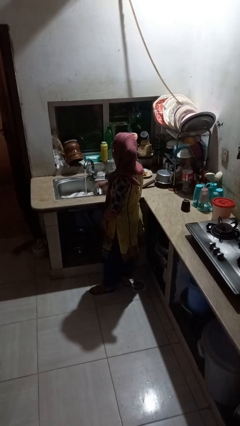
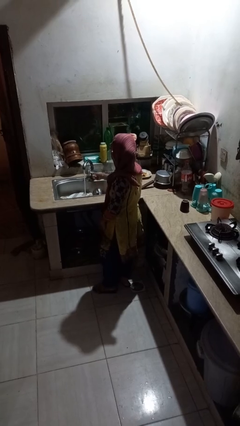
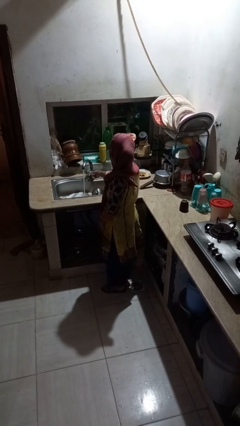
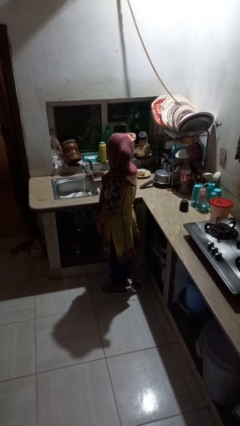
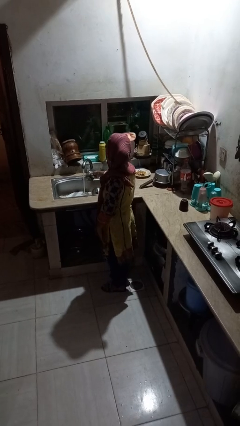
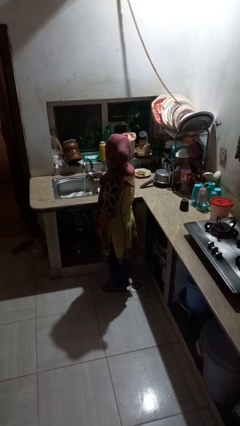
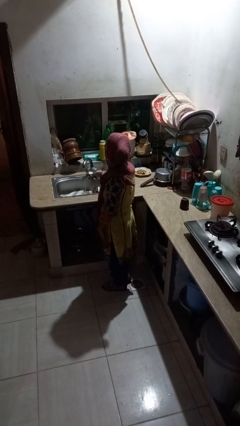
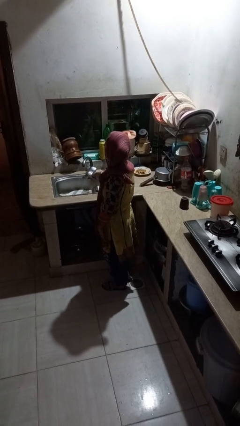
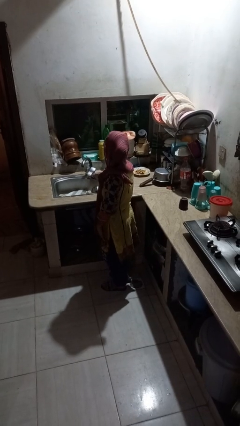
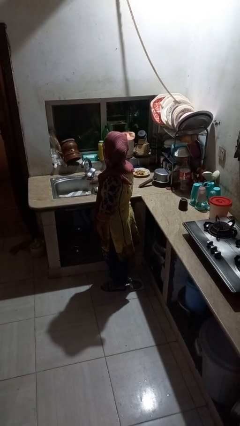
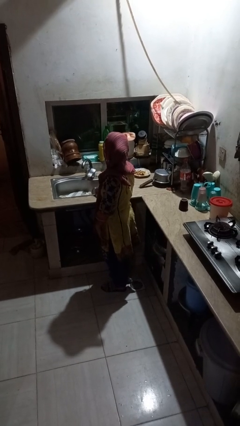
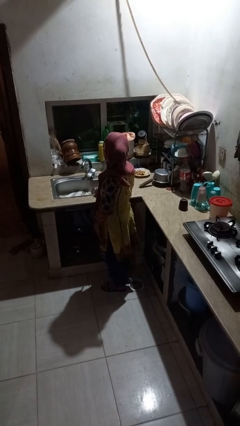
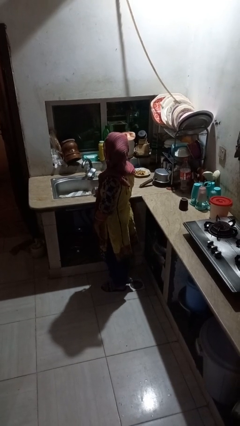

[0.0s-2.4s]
person turns off faucet

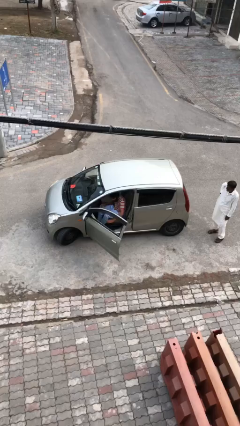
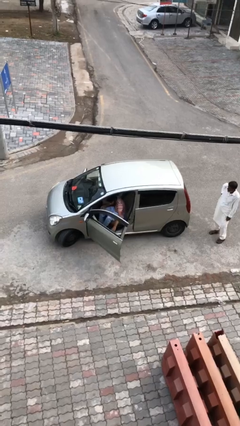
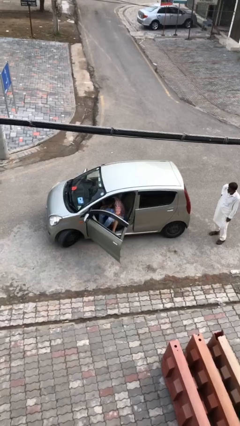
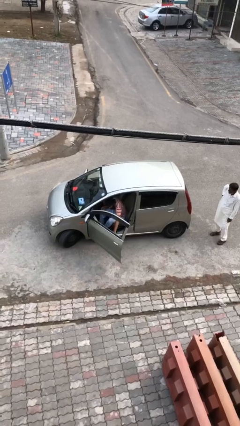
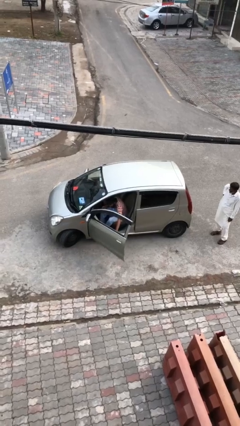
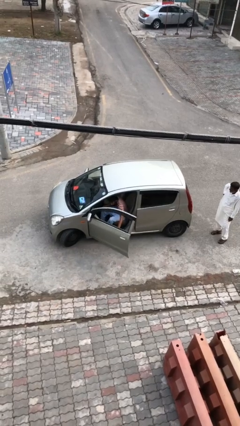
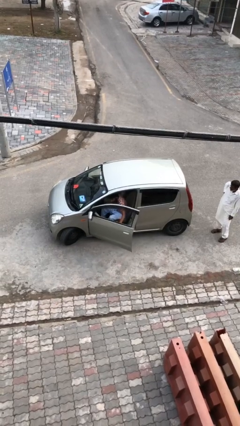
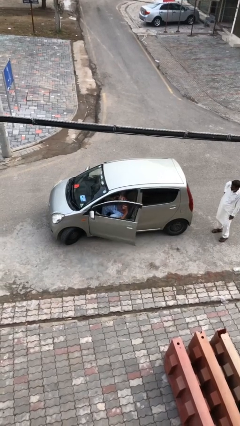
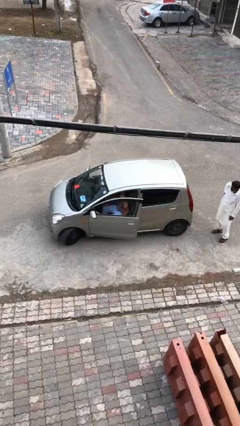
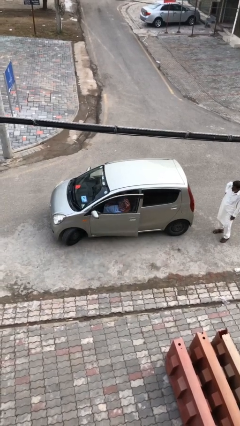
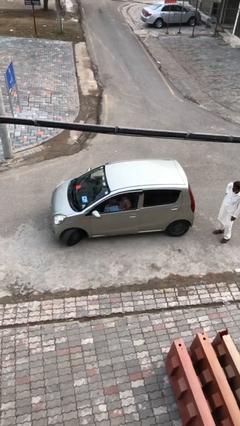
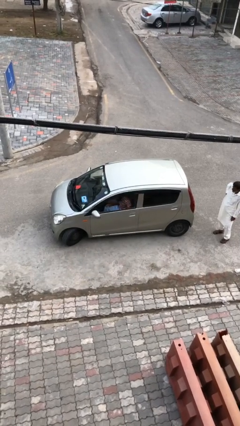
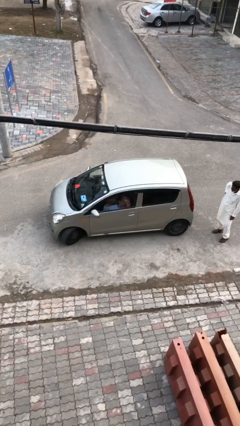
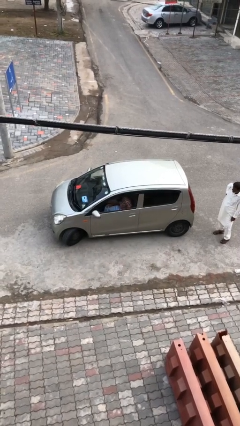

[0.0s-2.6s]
person closes car door

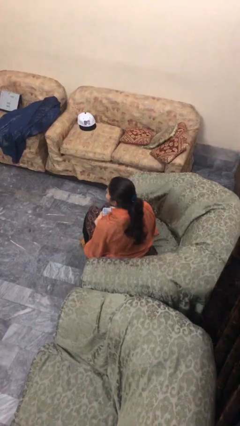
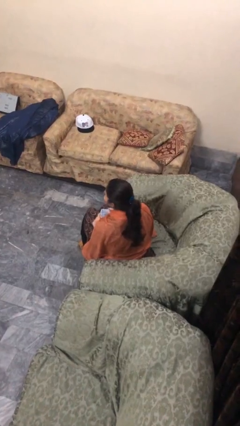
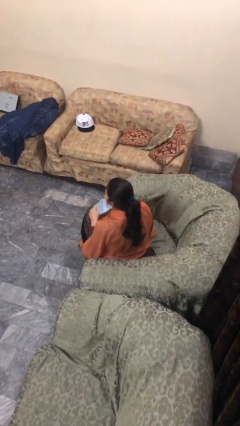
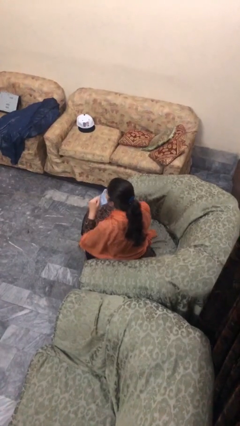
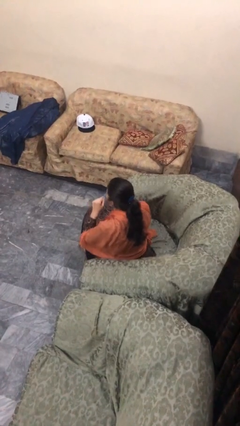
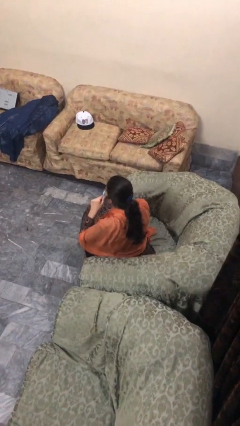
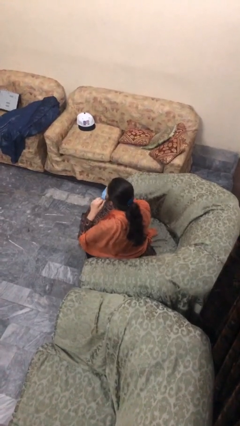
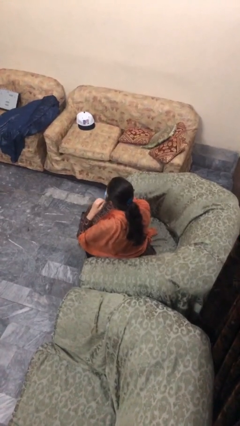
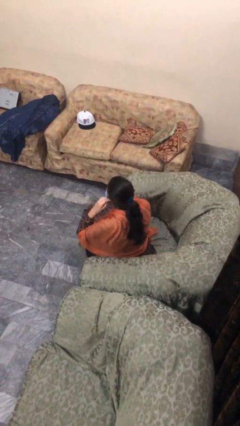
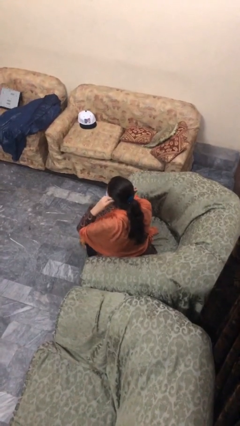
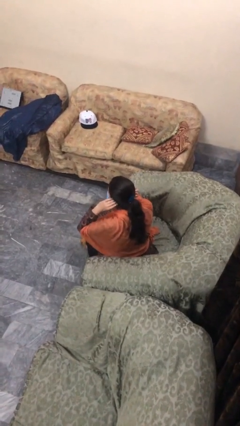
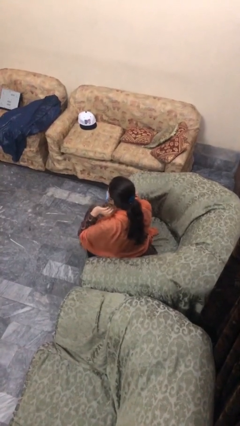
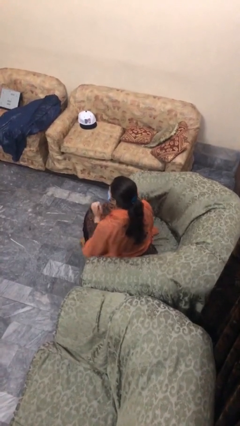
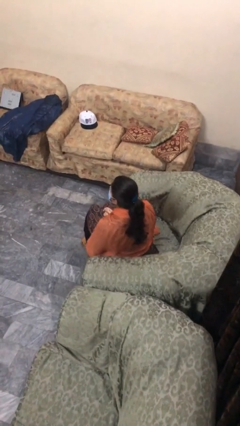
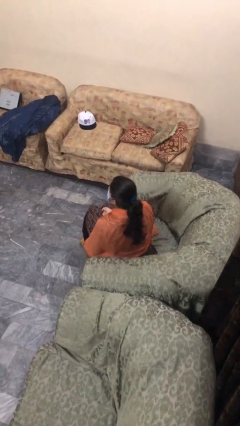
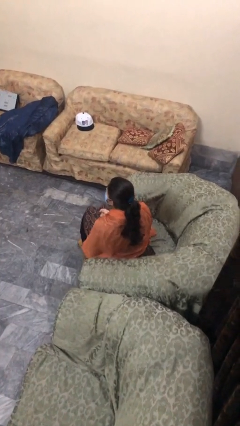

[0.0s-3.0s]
person puts on facemask

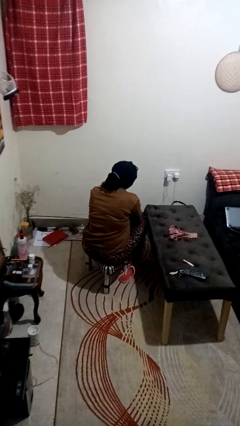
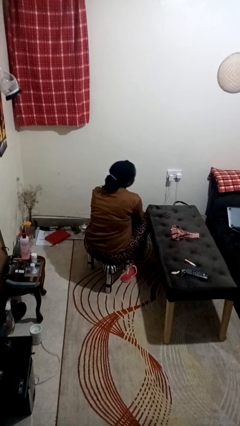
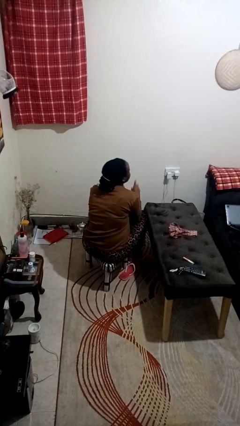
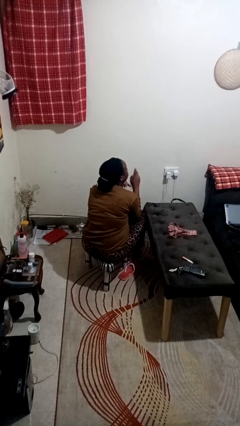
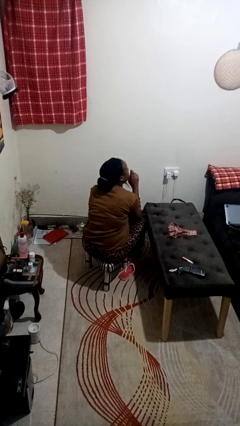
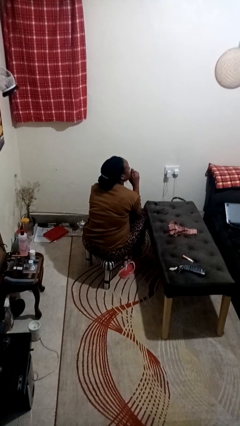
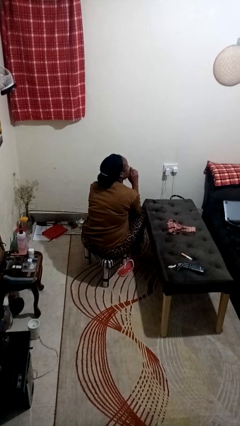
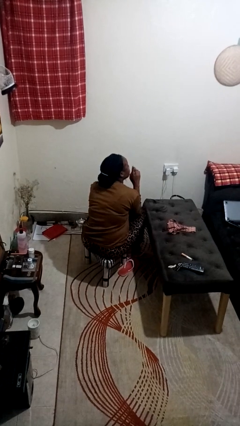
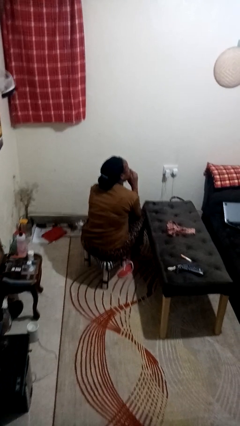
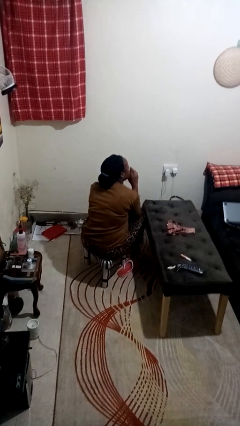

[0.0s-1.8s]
person gestures be quiet

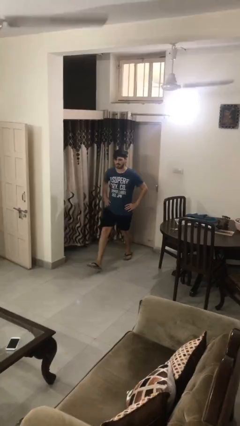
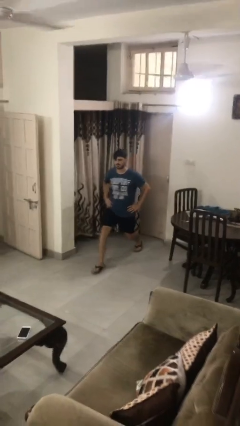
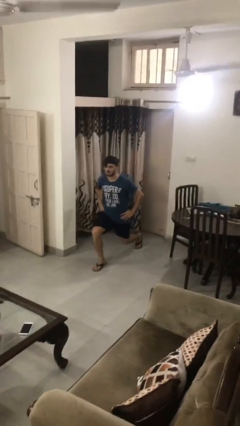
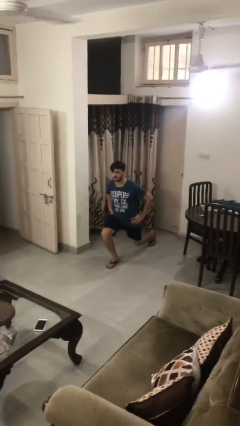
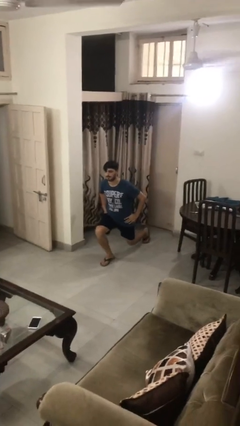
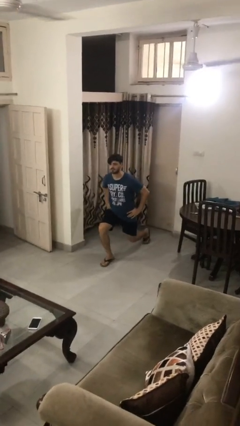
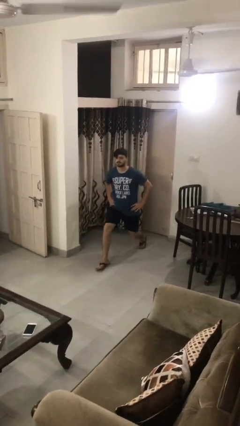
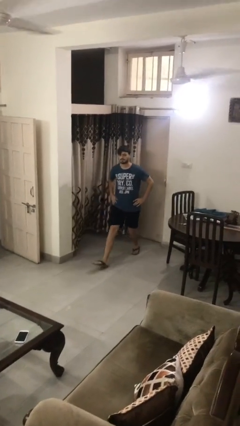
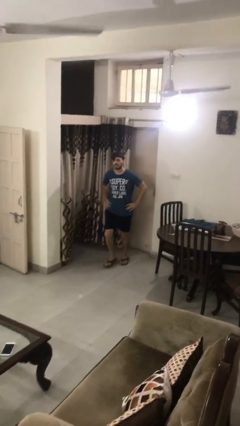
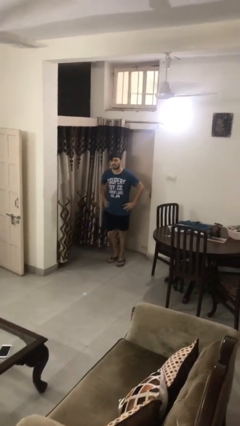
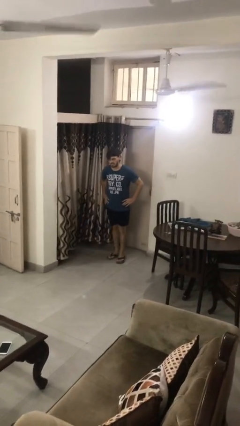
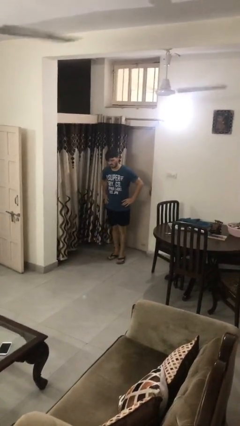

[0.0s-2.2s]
person exercises with lunges

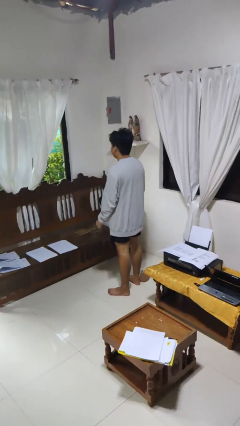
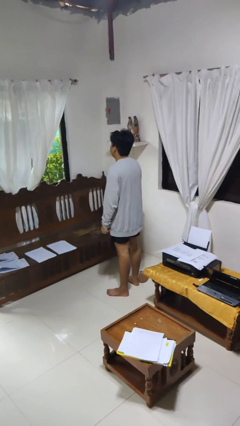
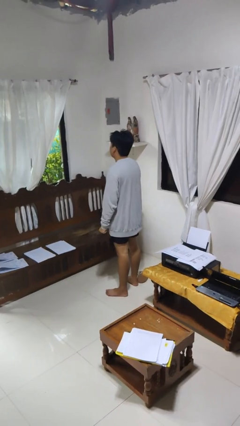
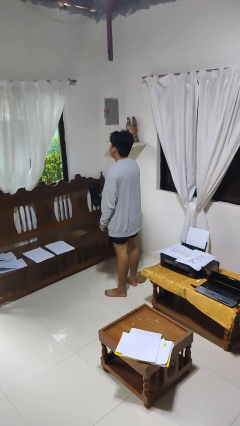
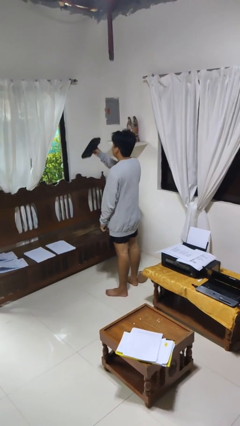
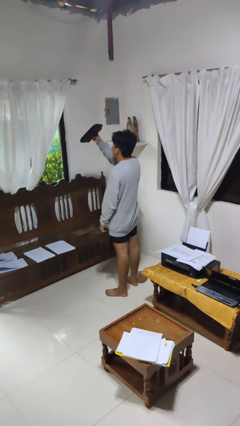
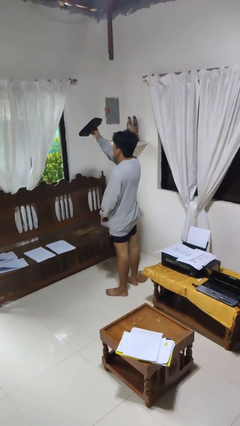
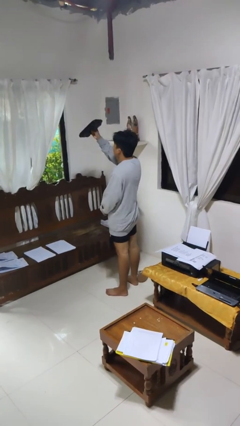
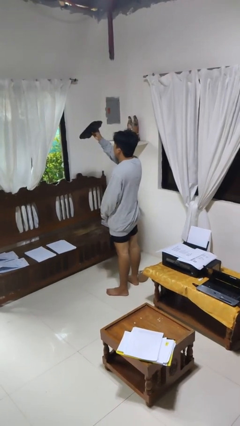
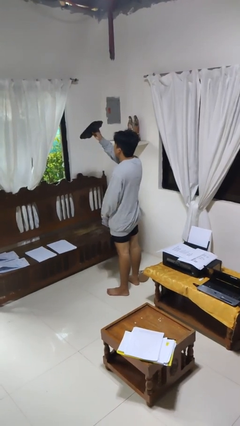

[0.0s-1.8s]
person holds object above head

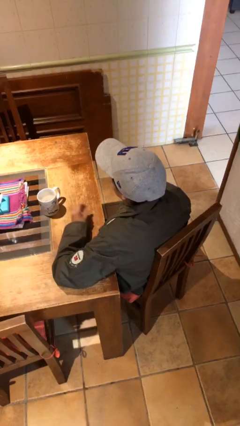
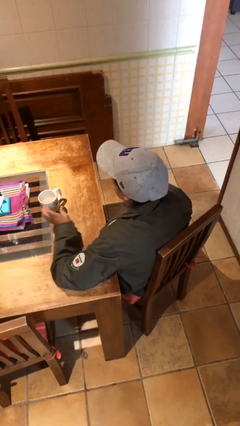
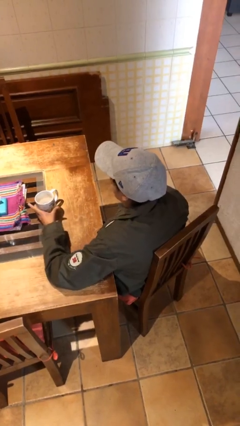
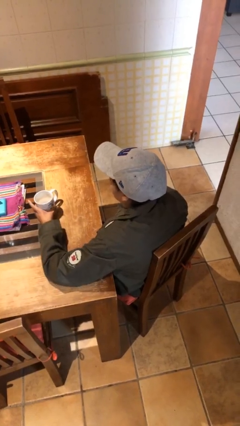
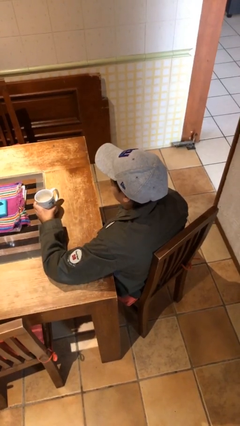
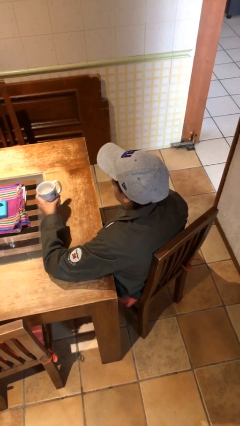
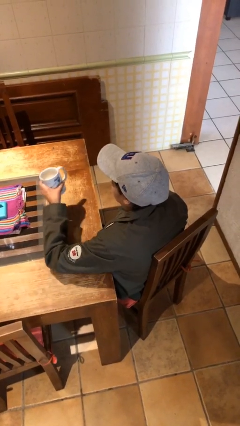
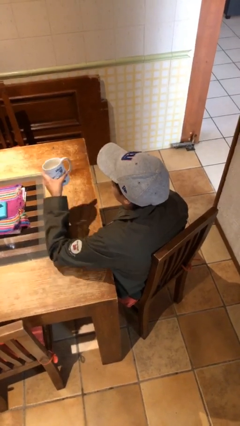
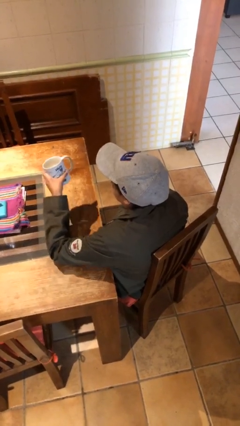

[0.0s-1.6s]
person picks up object from table

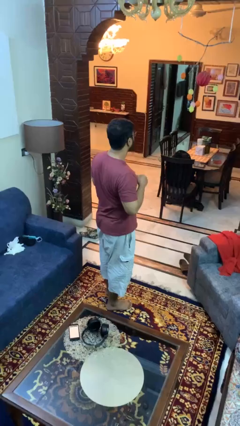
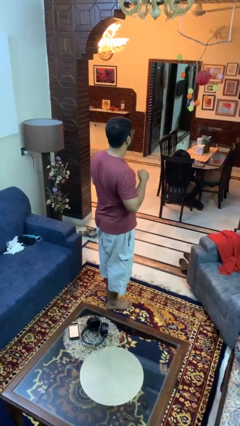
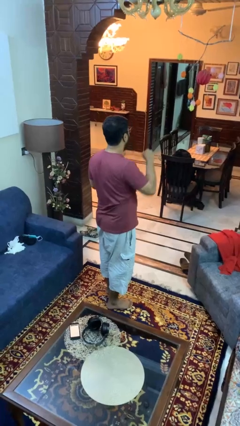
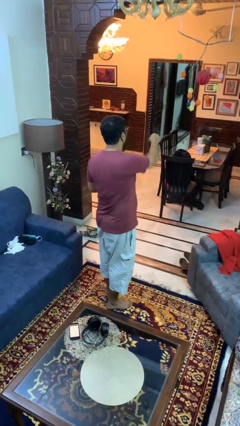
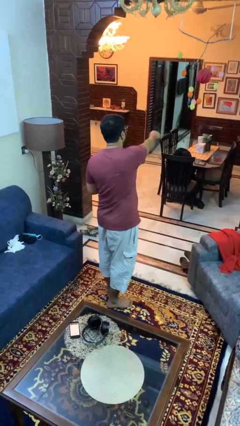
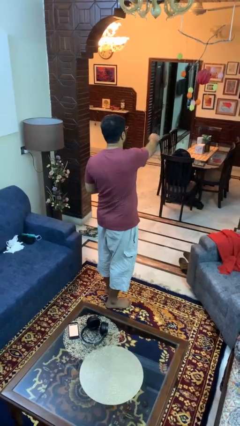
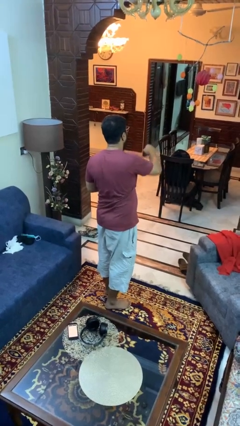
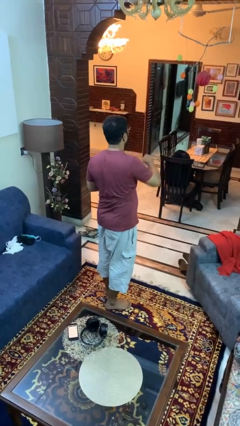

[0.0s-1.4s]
person karate chop
